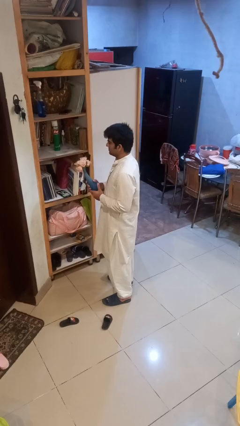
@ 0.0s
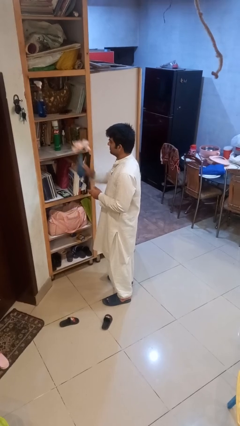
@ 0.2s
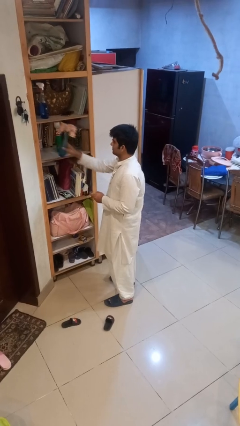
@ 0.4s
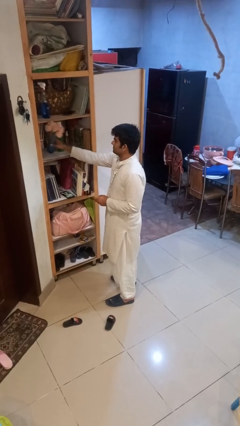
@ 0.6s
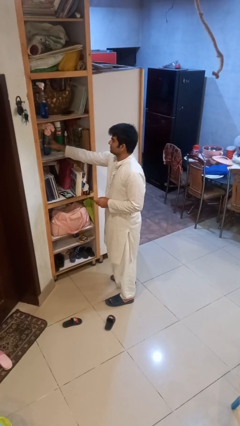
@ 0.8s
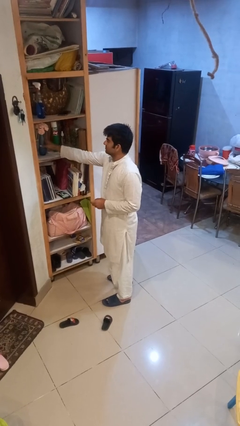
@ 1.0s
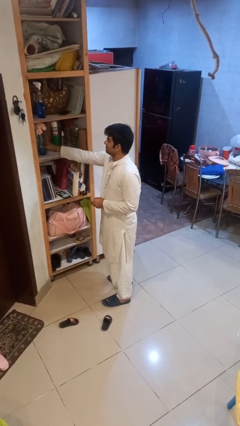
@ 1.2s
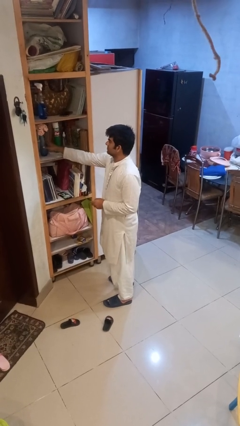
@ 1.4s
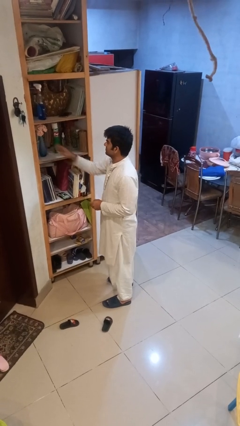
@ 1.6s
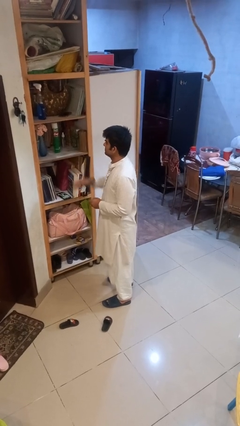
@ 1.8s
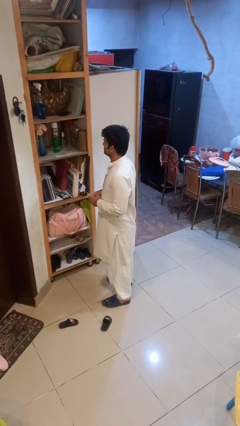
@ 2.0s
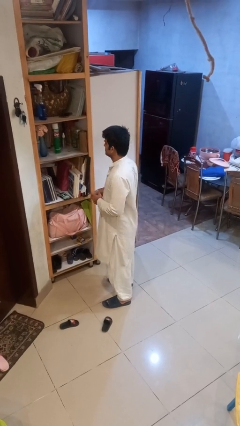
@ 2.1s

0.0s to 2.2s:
person puts down object on shelf

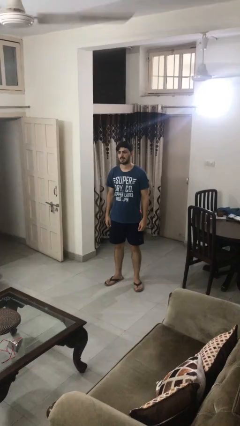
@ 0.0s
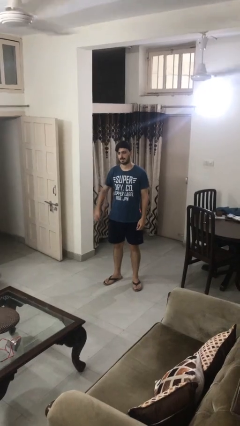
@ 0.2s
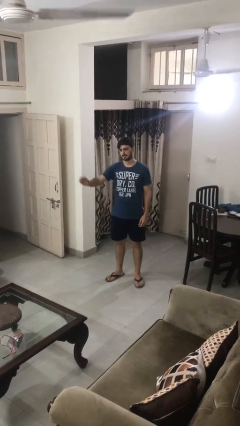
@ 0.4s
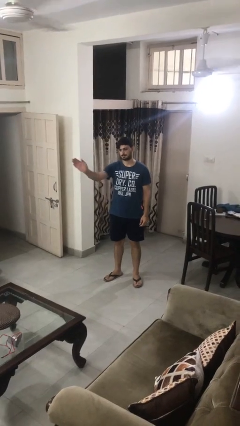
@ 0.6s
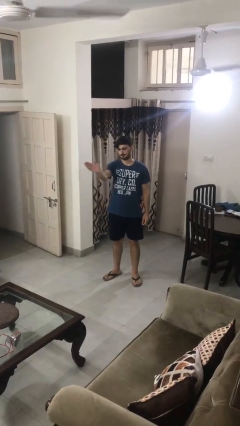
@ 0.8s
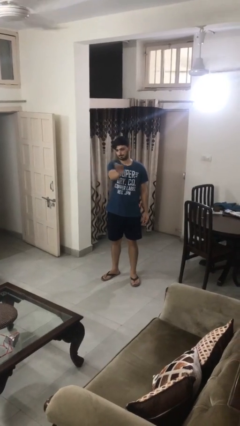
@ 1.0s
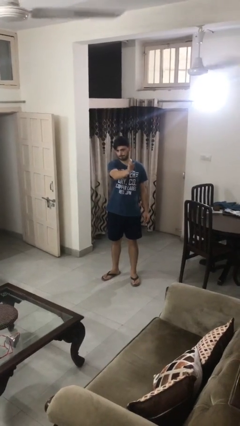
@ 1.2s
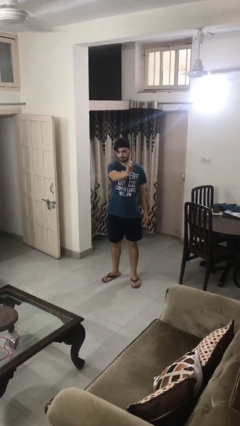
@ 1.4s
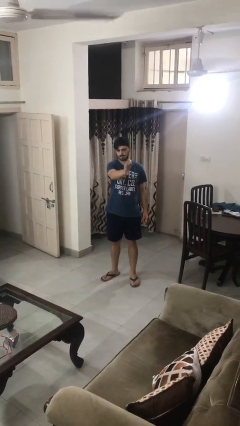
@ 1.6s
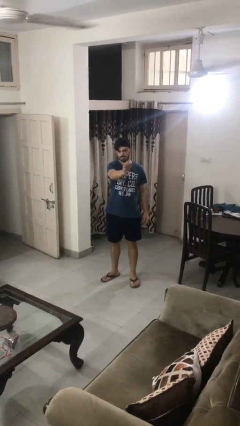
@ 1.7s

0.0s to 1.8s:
person gestures swipe left

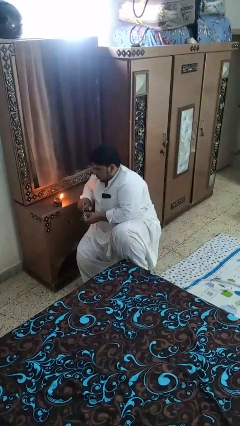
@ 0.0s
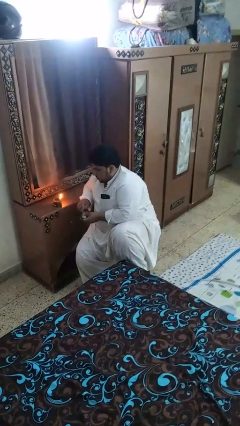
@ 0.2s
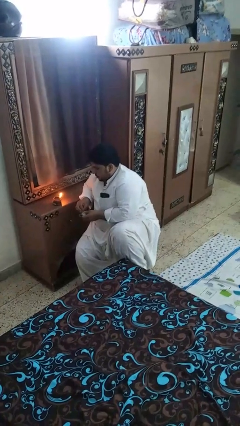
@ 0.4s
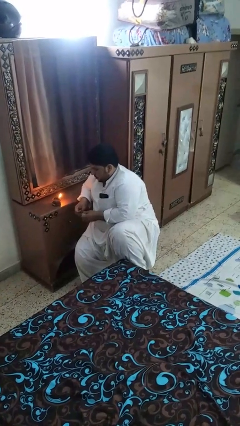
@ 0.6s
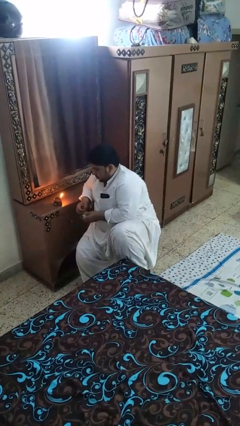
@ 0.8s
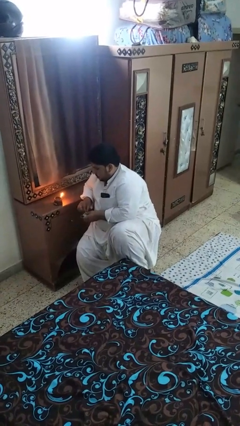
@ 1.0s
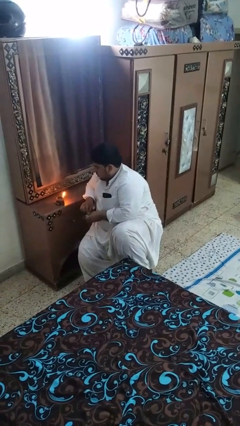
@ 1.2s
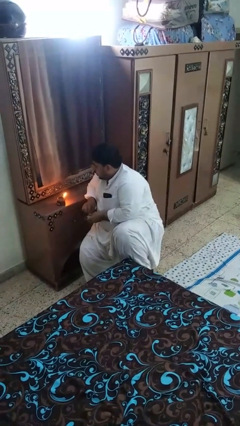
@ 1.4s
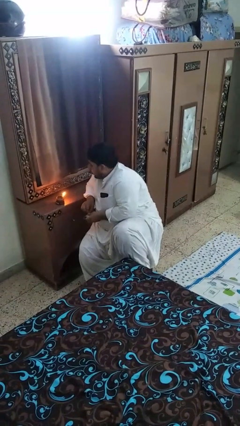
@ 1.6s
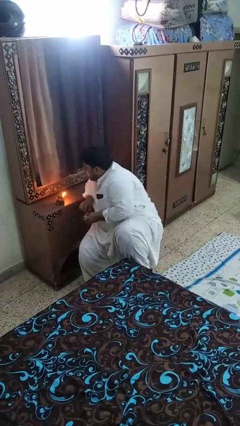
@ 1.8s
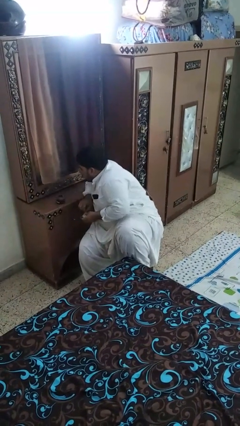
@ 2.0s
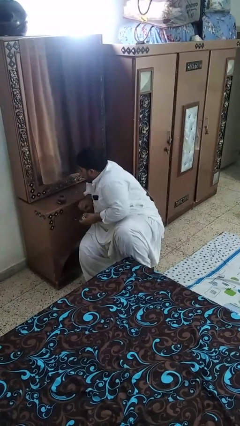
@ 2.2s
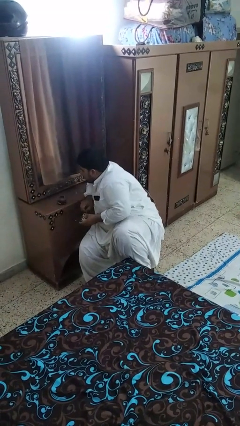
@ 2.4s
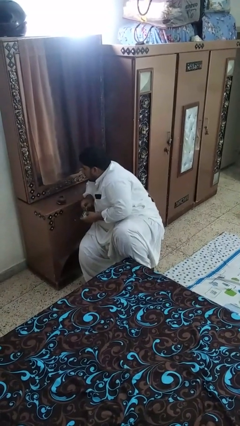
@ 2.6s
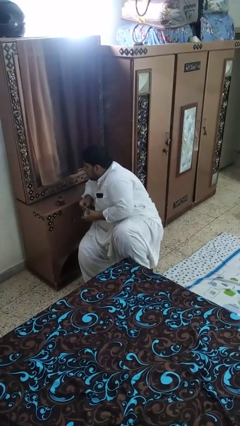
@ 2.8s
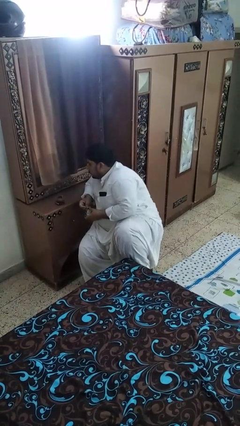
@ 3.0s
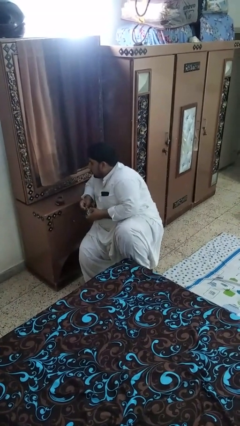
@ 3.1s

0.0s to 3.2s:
person extinguishes candle

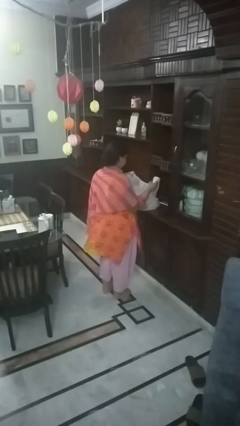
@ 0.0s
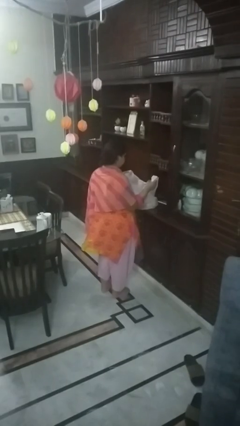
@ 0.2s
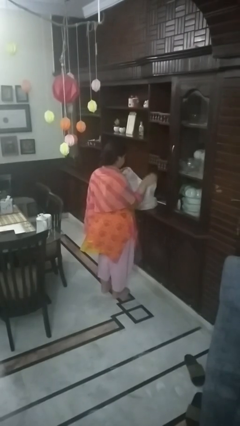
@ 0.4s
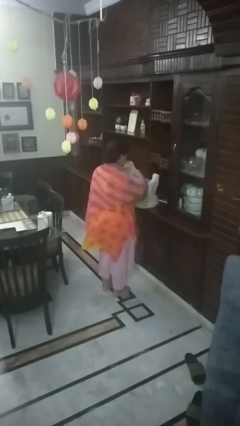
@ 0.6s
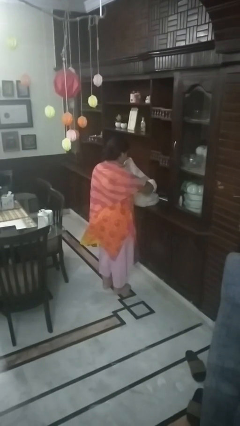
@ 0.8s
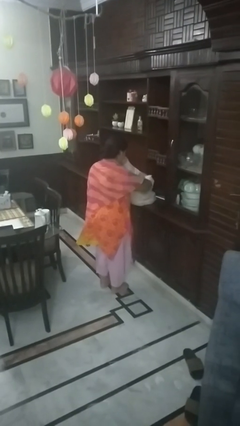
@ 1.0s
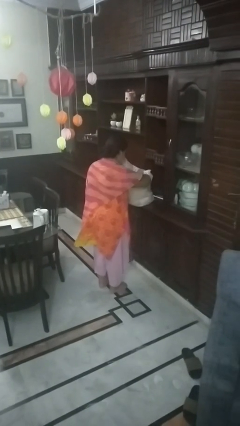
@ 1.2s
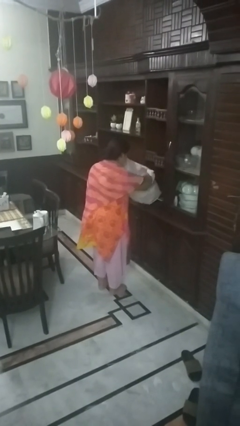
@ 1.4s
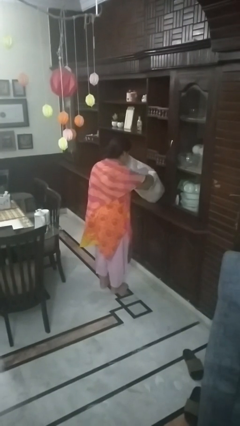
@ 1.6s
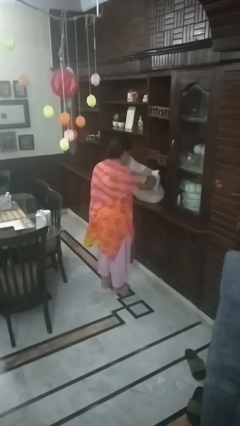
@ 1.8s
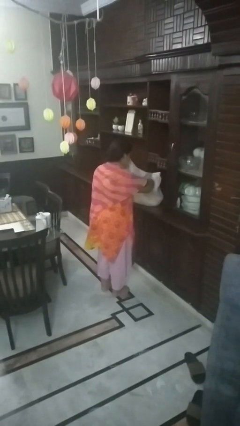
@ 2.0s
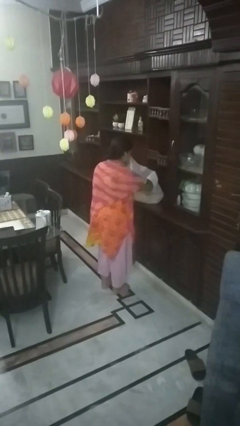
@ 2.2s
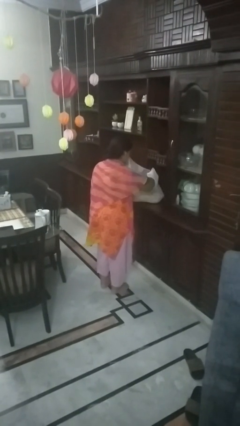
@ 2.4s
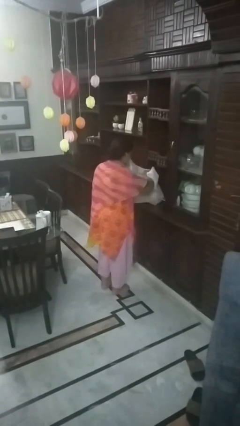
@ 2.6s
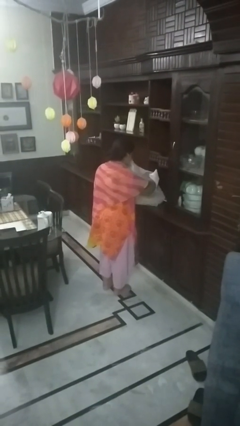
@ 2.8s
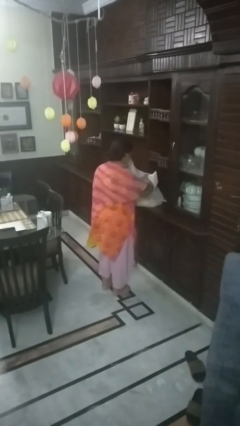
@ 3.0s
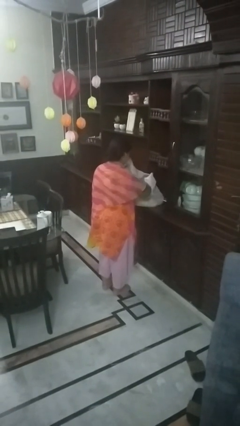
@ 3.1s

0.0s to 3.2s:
person searches in bag

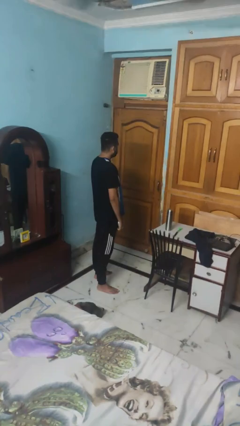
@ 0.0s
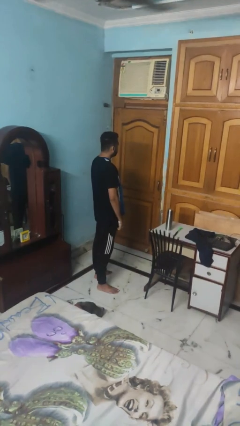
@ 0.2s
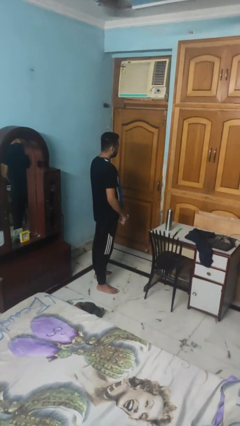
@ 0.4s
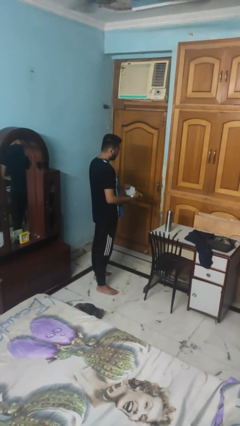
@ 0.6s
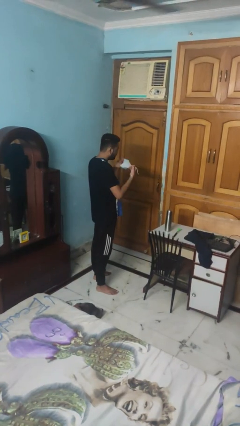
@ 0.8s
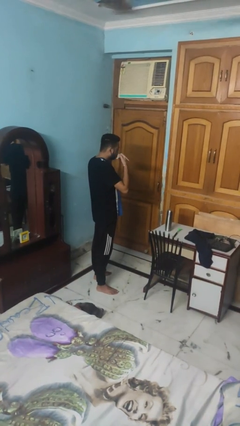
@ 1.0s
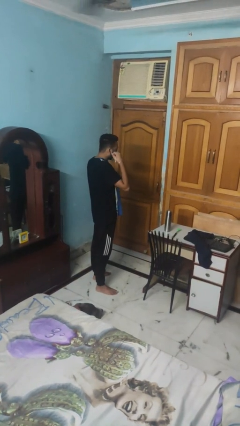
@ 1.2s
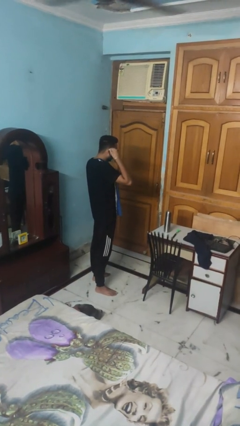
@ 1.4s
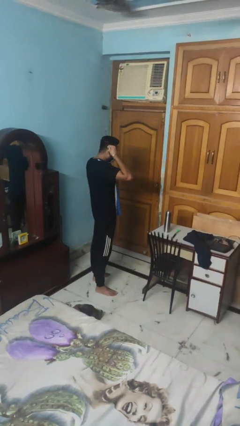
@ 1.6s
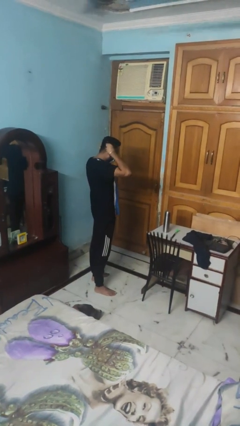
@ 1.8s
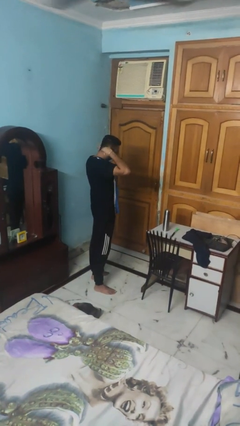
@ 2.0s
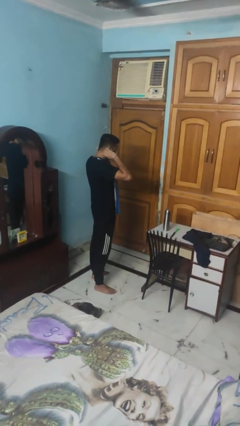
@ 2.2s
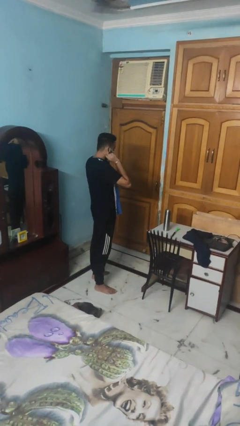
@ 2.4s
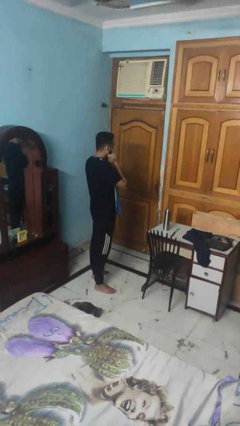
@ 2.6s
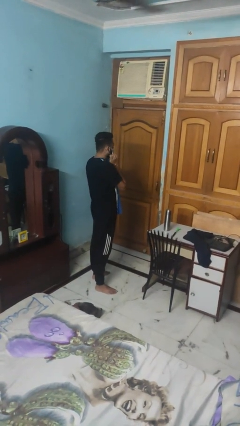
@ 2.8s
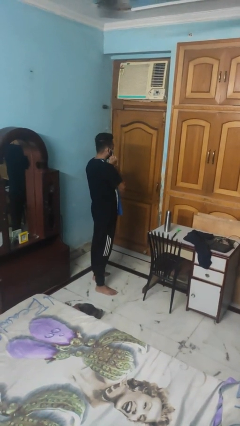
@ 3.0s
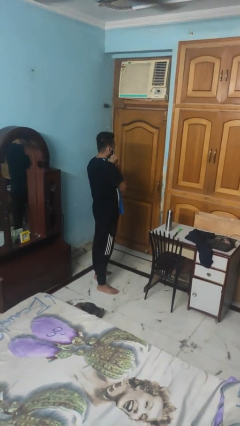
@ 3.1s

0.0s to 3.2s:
person puts on facemask

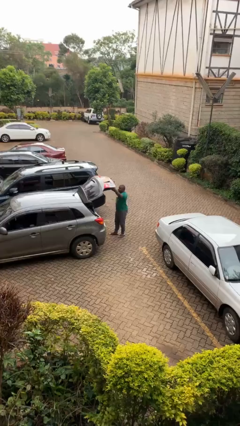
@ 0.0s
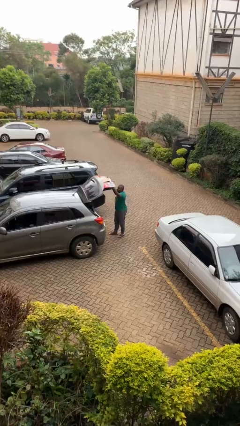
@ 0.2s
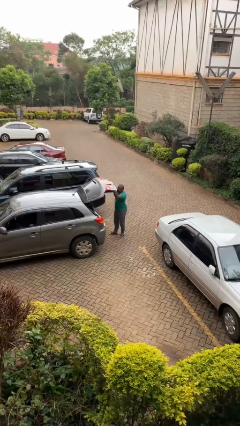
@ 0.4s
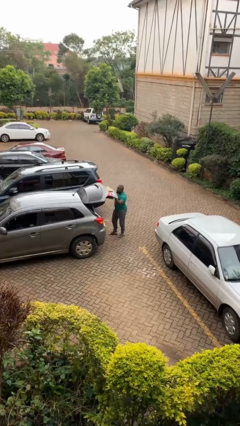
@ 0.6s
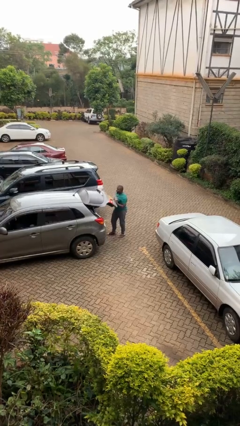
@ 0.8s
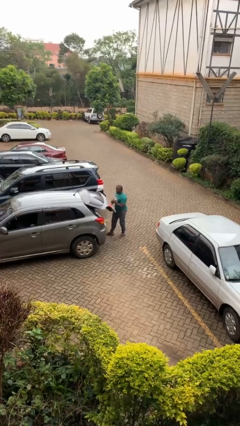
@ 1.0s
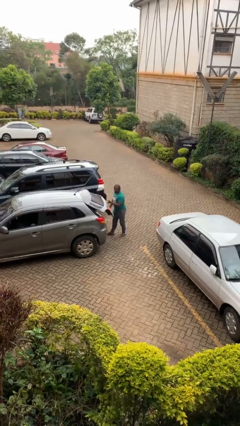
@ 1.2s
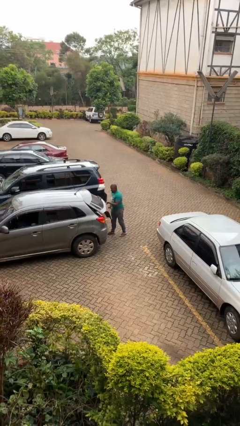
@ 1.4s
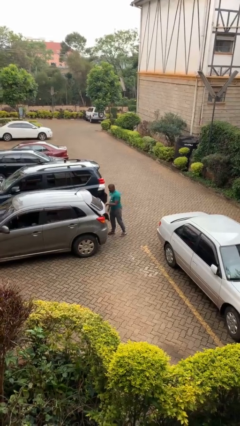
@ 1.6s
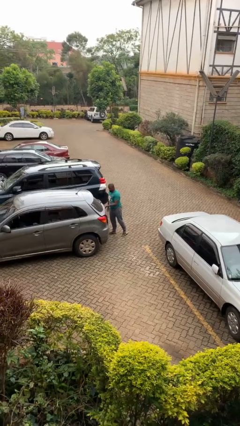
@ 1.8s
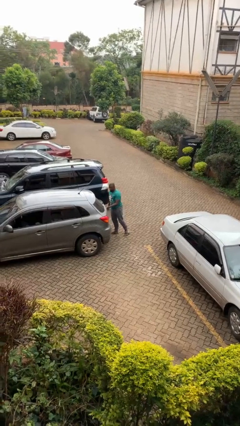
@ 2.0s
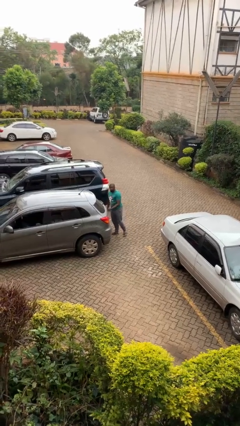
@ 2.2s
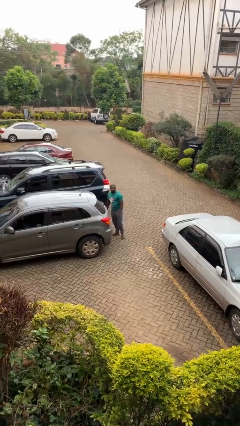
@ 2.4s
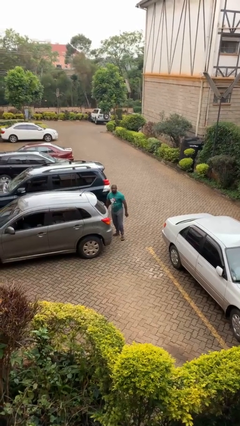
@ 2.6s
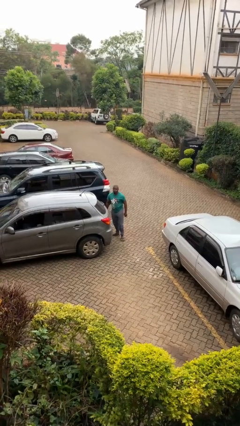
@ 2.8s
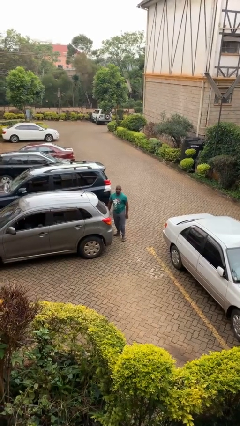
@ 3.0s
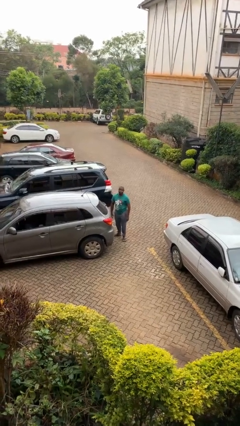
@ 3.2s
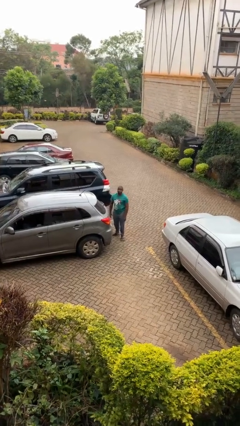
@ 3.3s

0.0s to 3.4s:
person closes car trunk

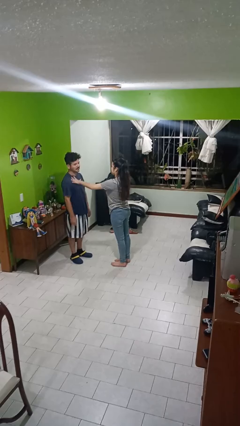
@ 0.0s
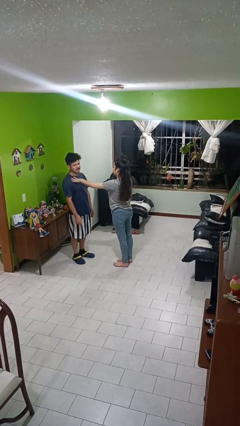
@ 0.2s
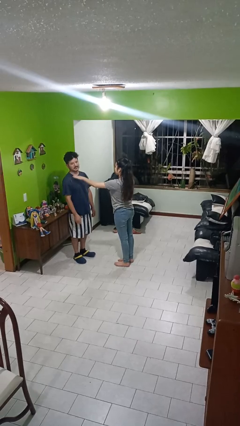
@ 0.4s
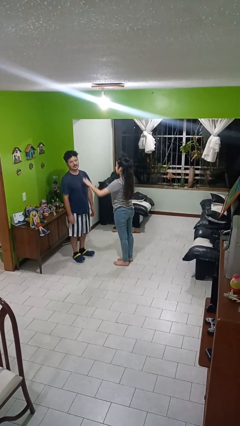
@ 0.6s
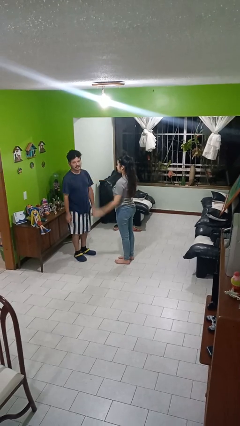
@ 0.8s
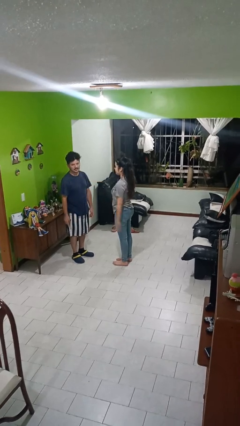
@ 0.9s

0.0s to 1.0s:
person shoves person
